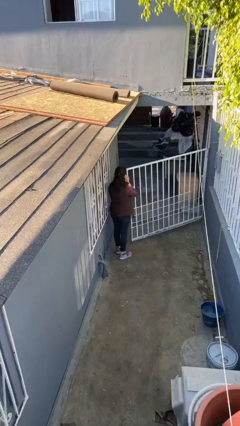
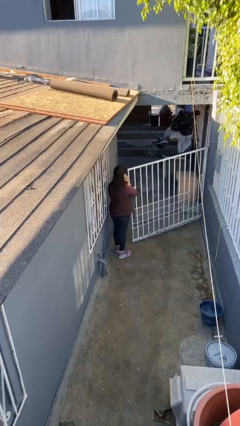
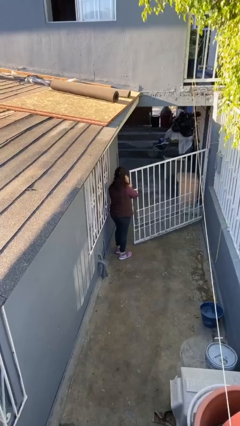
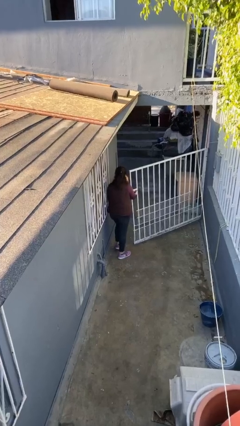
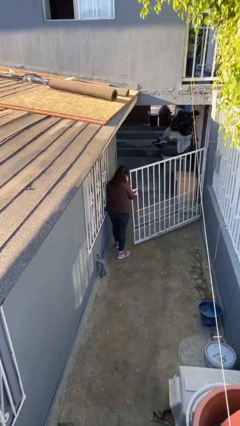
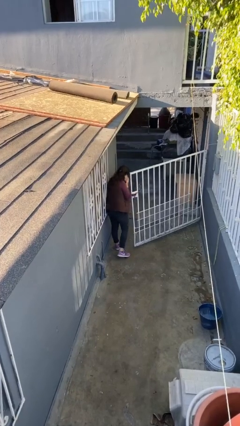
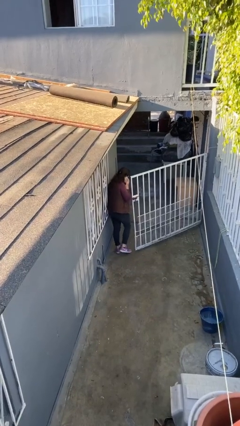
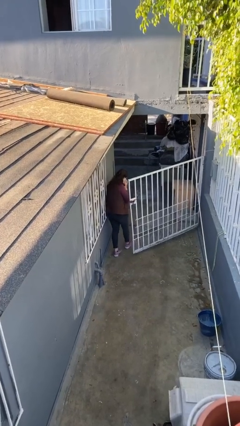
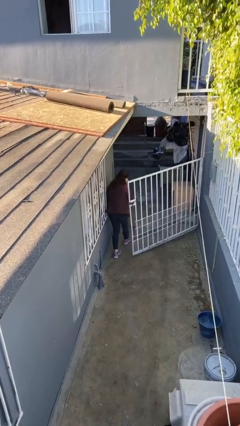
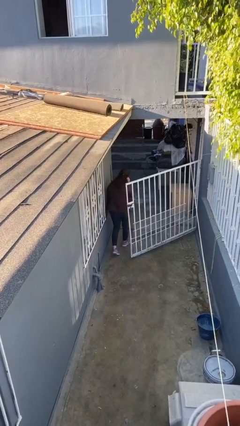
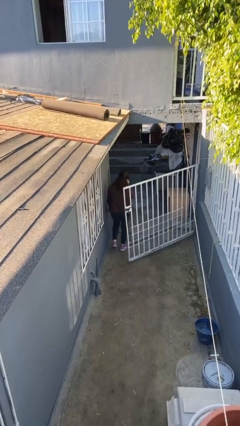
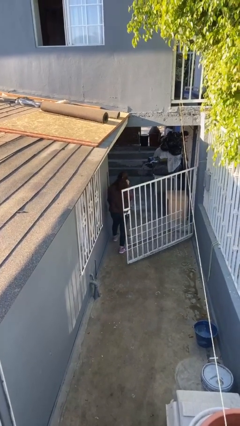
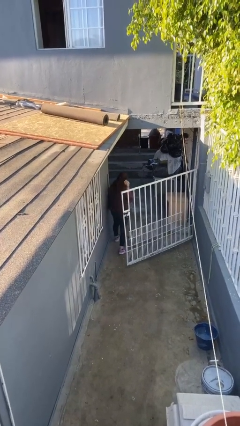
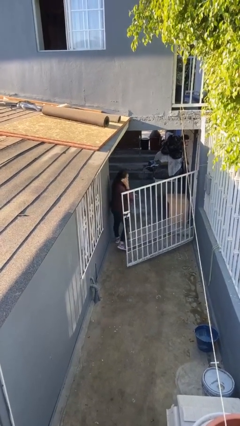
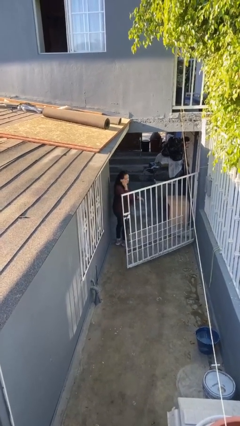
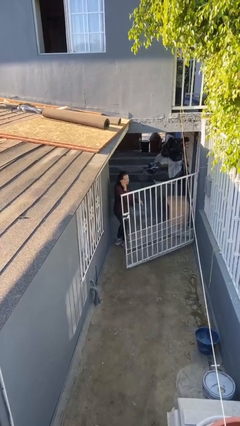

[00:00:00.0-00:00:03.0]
person exits scene through structure

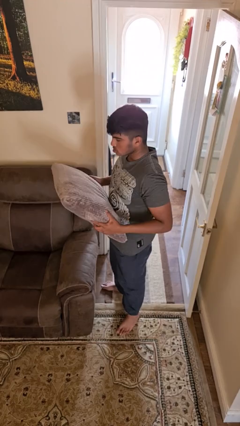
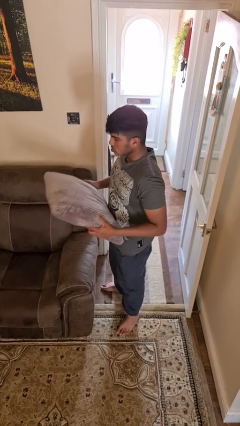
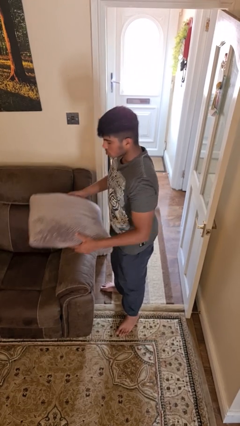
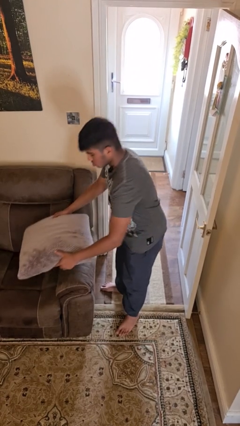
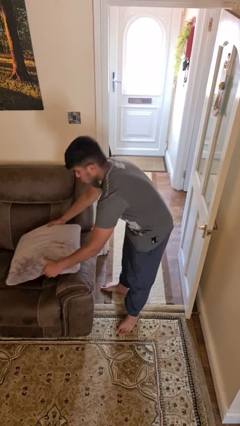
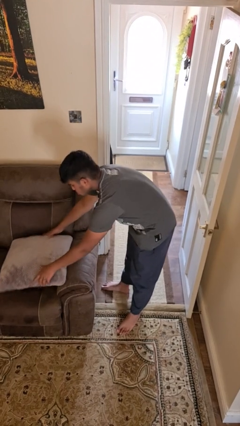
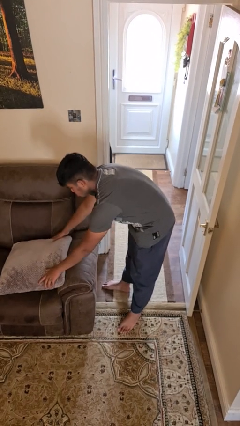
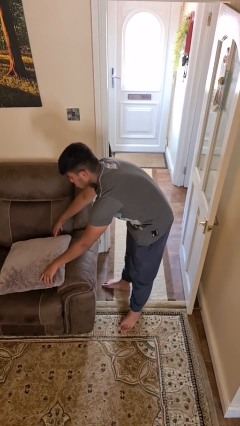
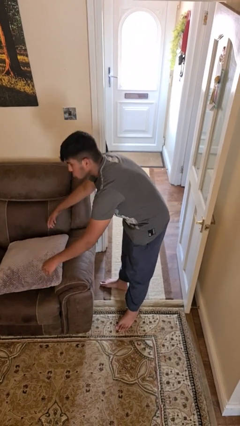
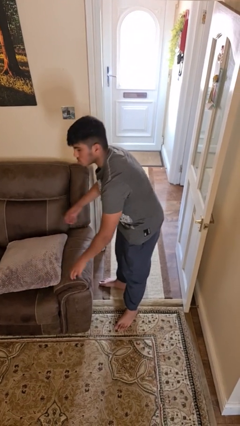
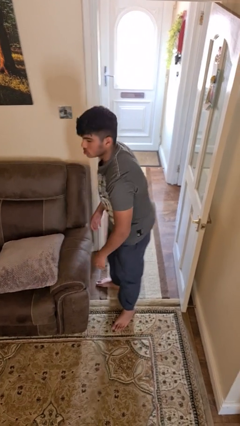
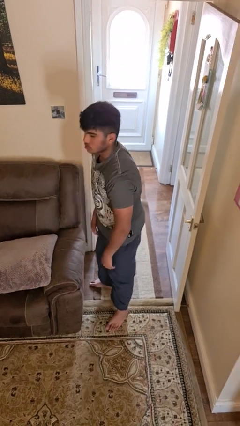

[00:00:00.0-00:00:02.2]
person puts down object on couch

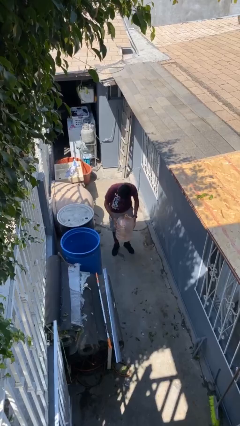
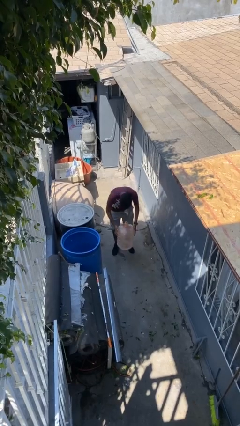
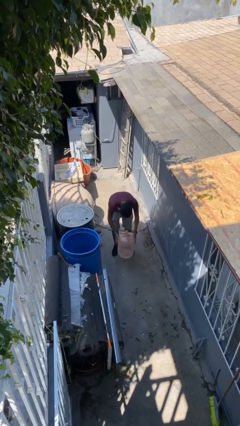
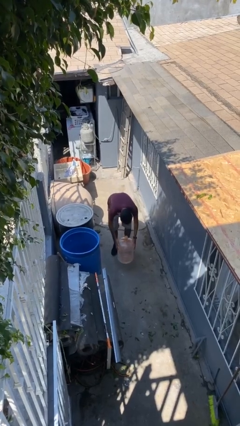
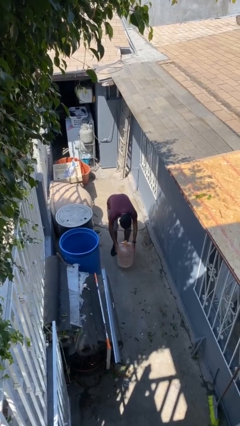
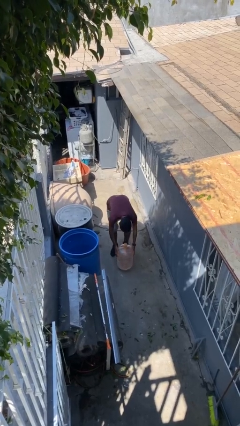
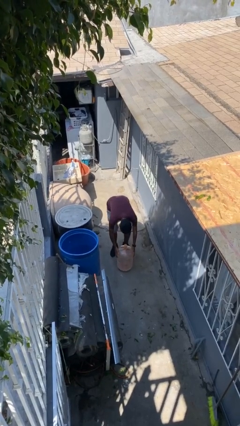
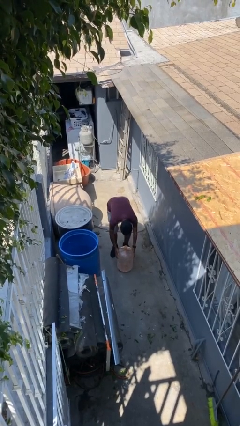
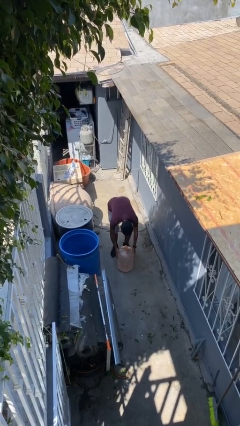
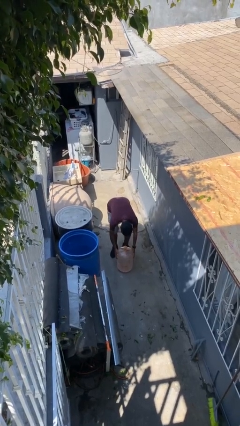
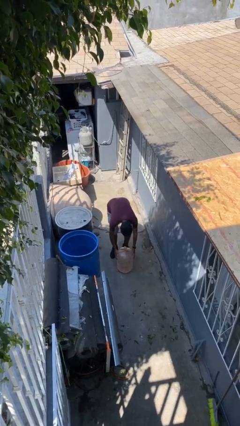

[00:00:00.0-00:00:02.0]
person puts down object on floor

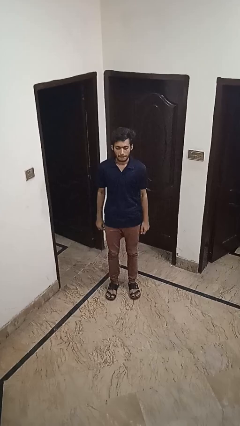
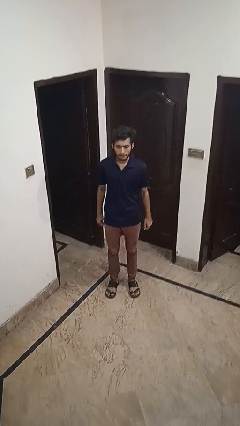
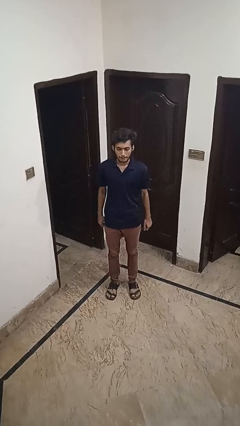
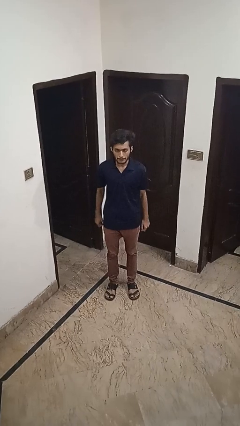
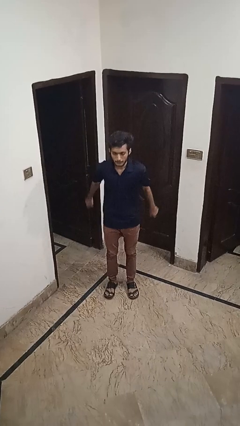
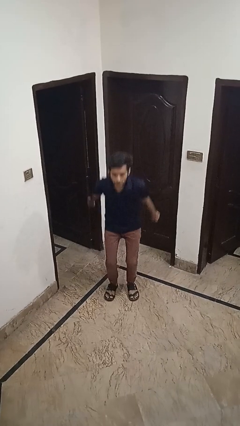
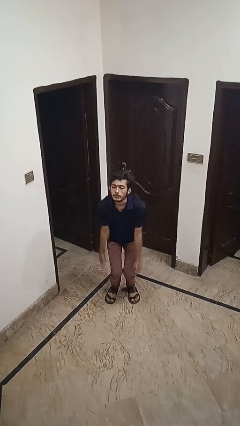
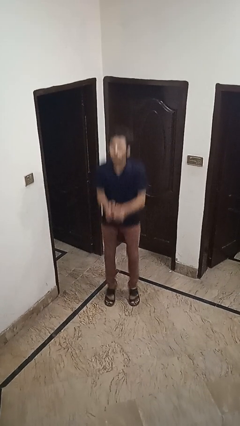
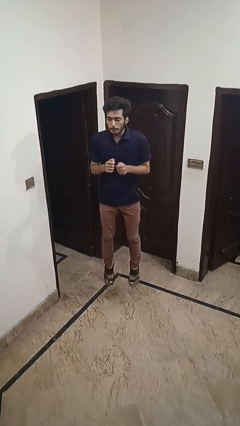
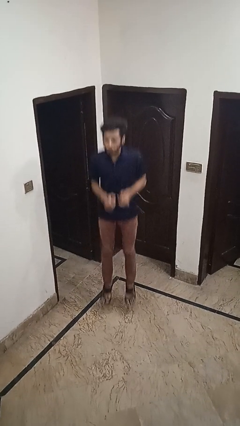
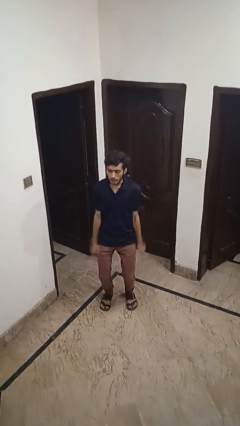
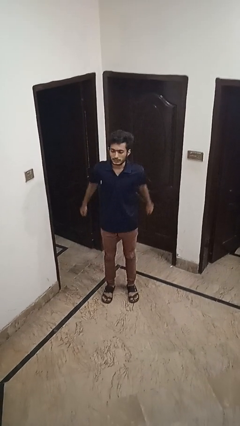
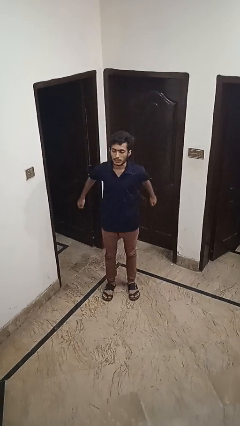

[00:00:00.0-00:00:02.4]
person jumps

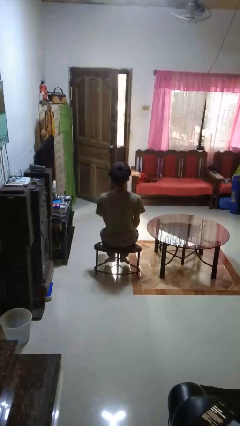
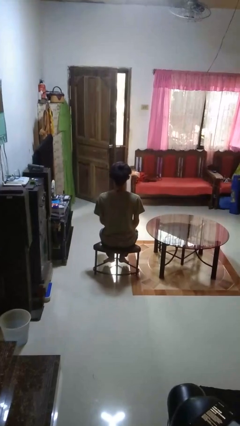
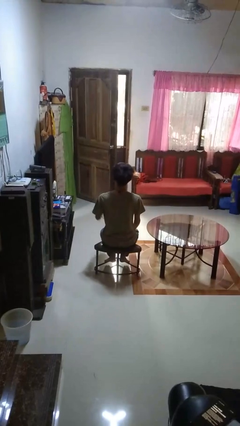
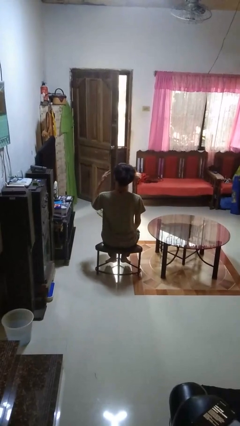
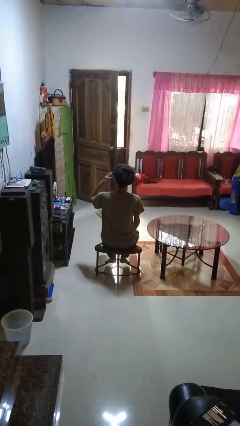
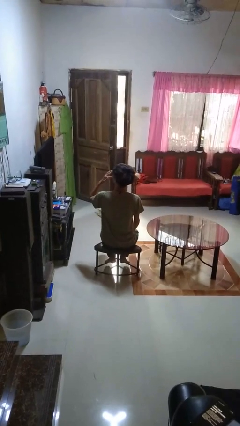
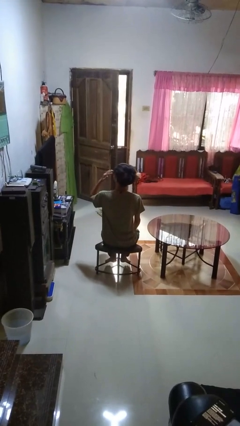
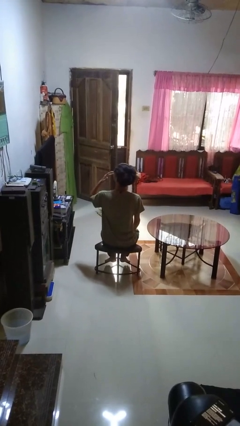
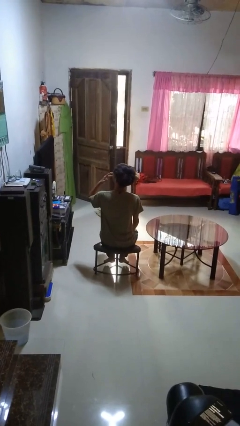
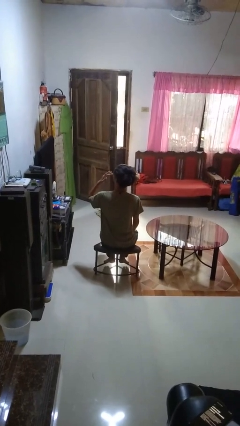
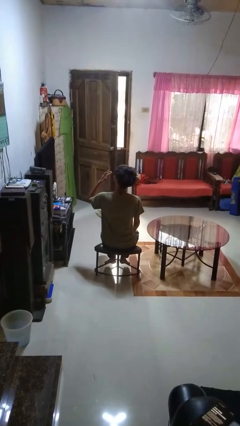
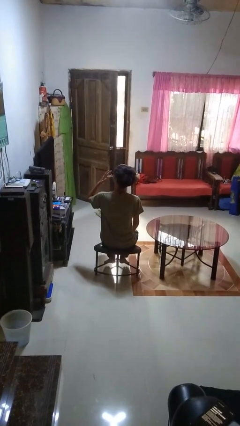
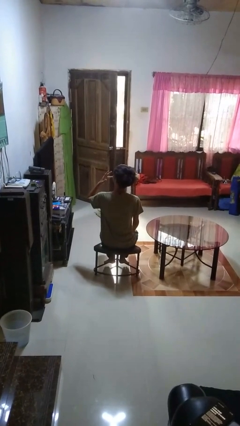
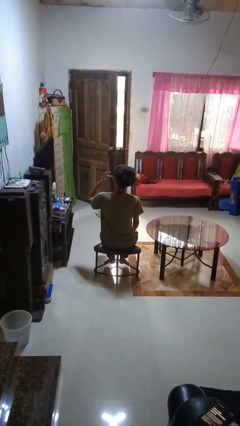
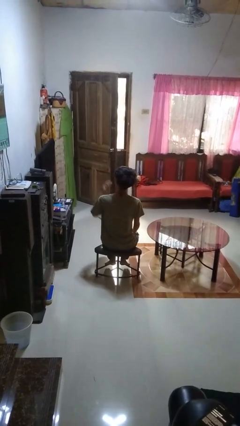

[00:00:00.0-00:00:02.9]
person licks fingers

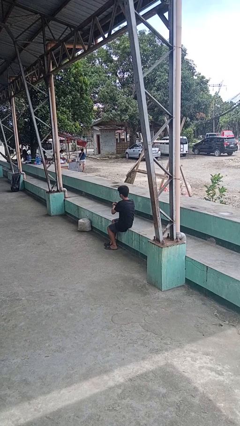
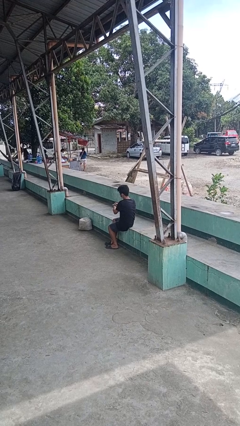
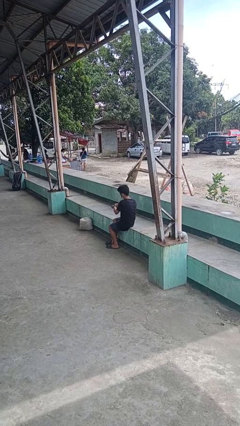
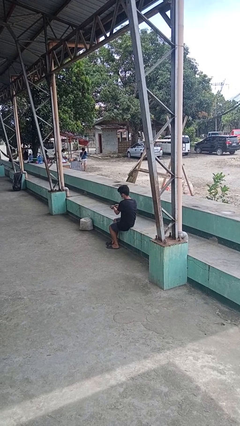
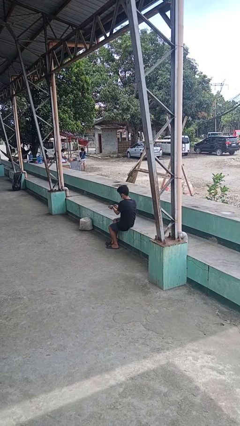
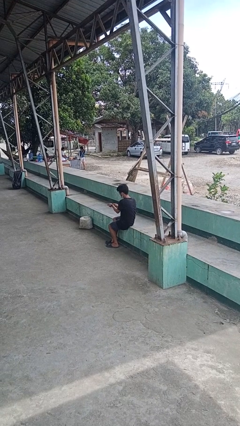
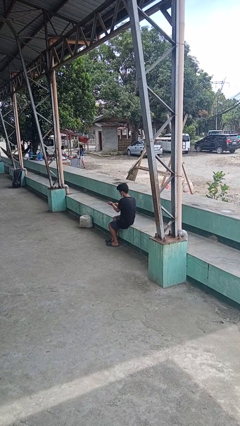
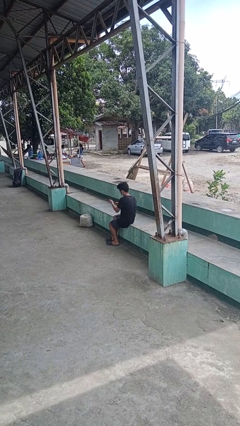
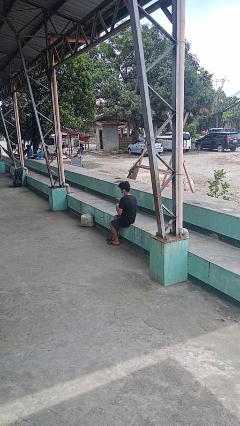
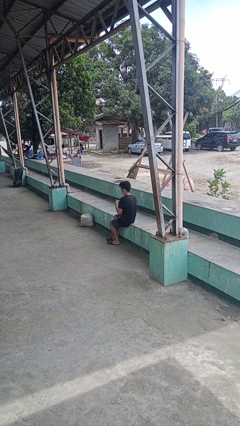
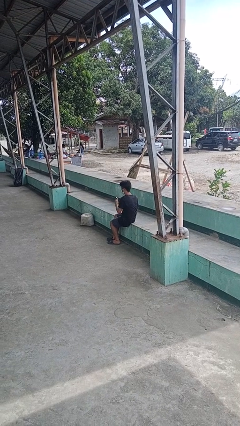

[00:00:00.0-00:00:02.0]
person takes off wristwatch

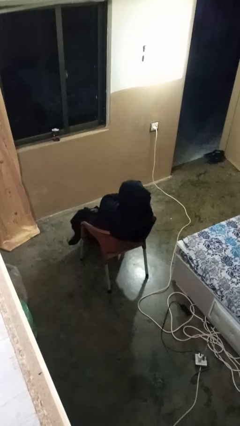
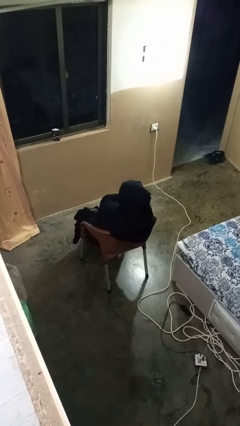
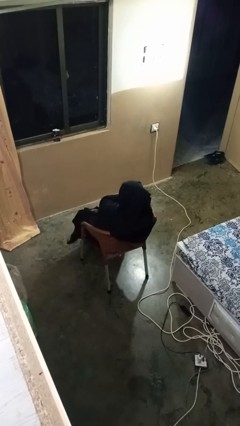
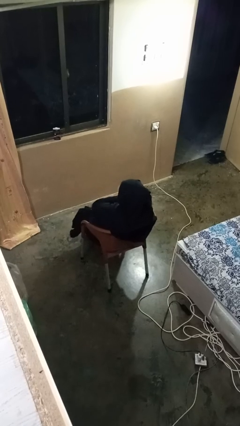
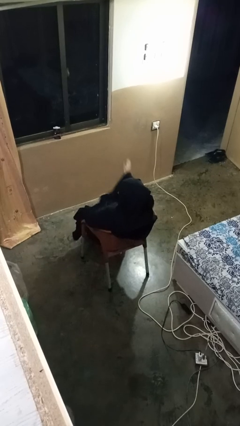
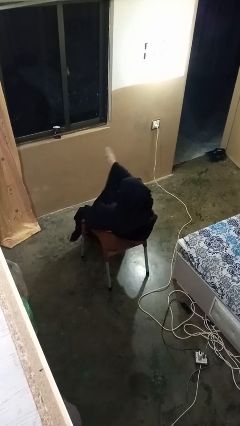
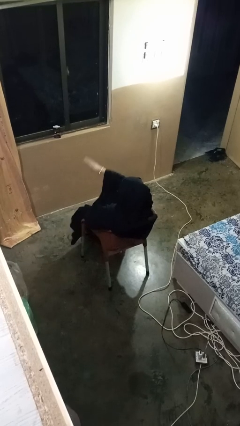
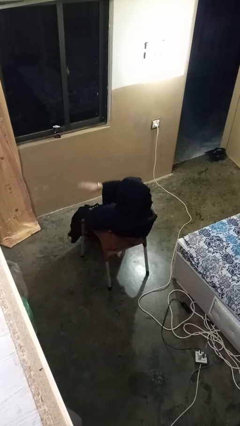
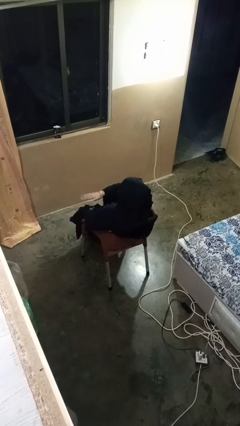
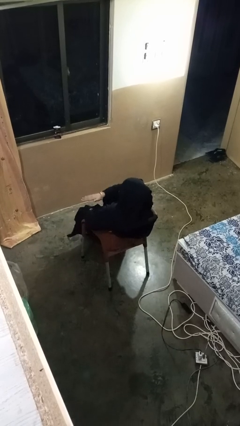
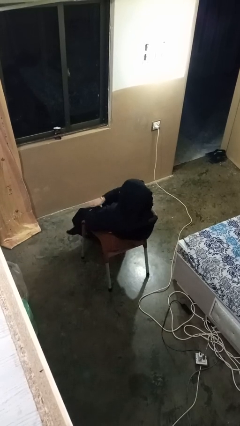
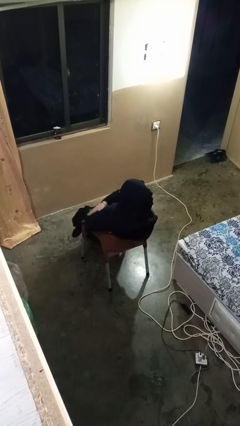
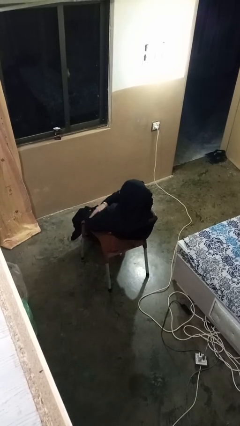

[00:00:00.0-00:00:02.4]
person gestures swipe left
